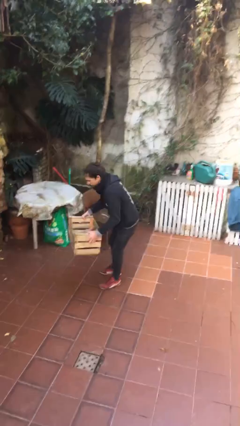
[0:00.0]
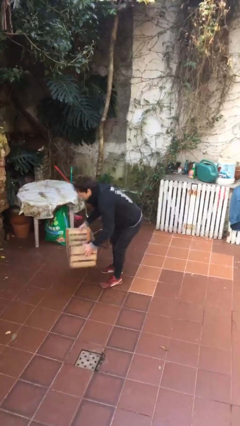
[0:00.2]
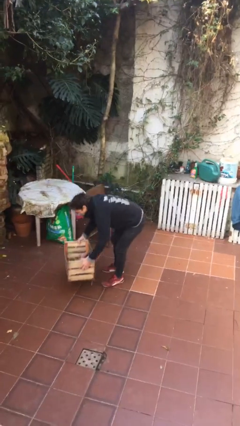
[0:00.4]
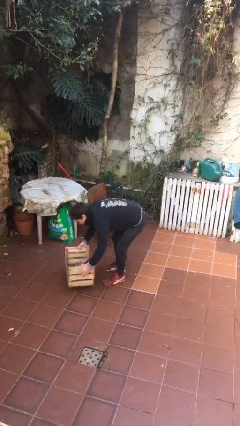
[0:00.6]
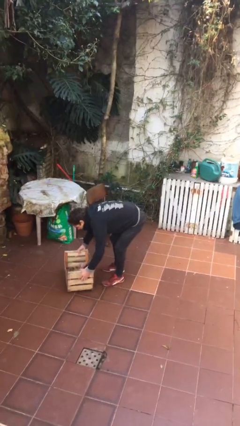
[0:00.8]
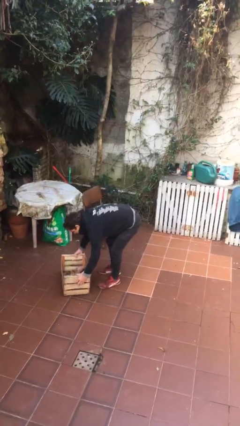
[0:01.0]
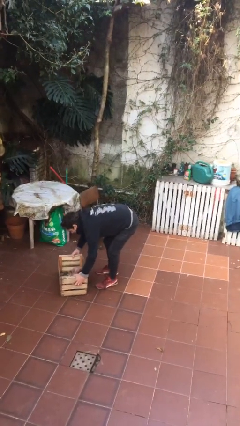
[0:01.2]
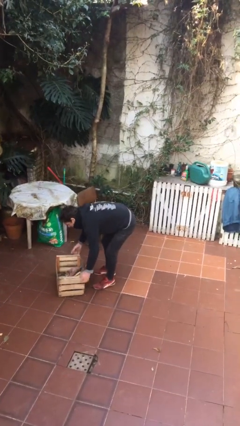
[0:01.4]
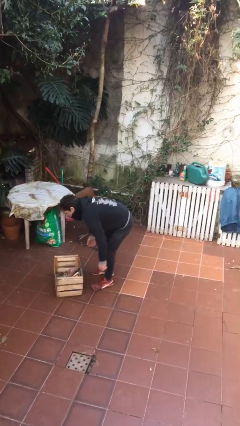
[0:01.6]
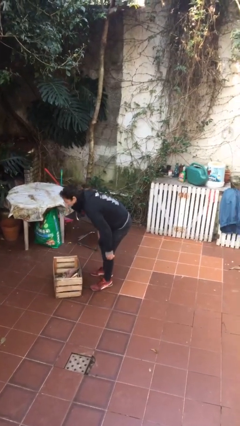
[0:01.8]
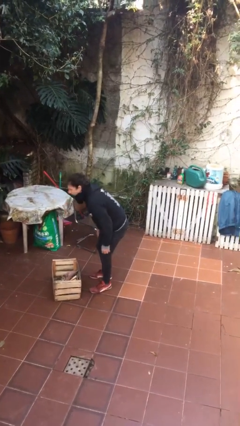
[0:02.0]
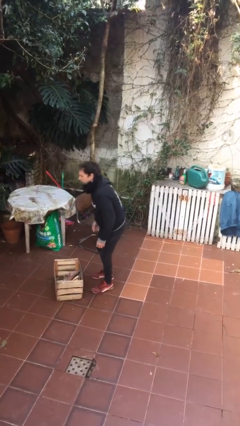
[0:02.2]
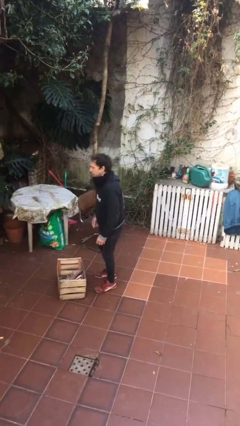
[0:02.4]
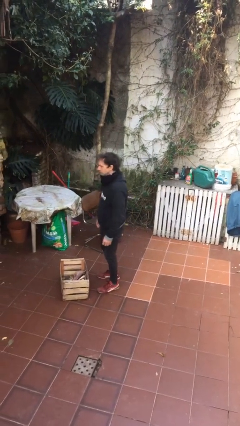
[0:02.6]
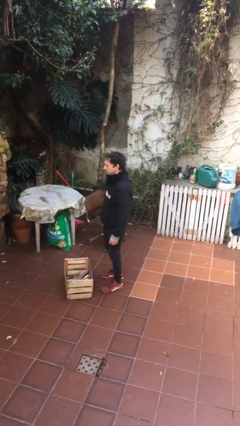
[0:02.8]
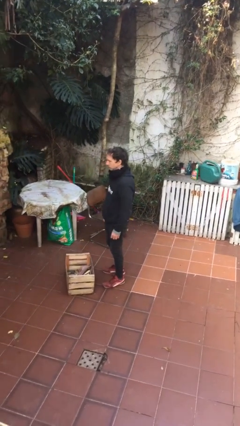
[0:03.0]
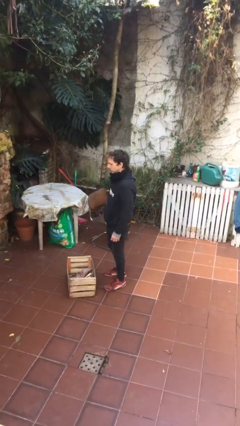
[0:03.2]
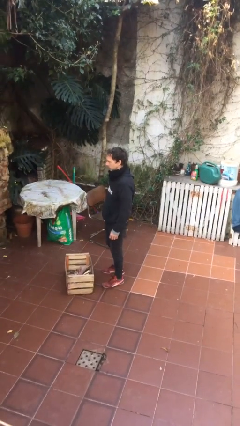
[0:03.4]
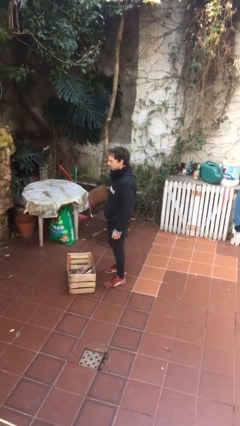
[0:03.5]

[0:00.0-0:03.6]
person puts down object on floor

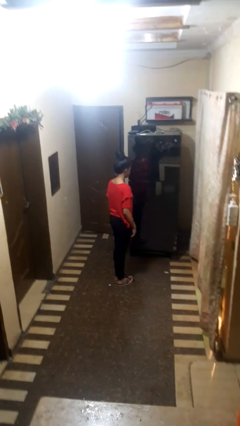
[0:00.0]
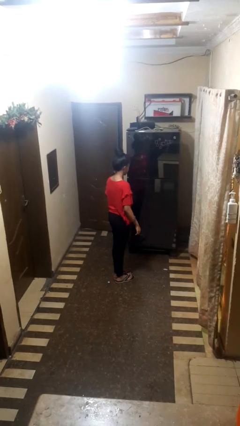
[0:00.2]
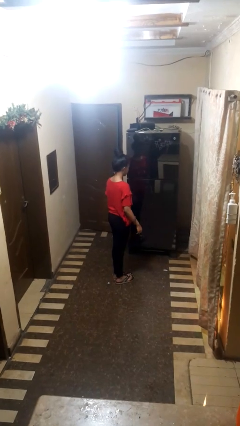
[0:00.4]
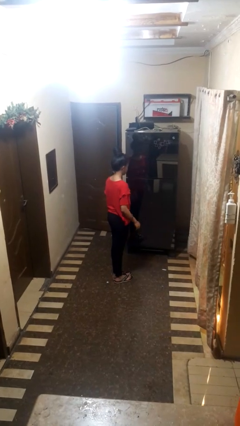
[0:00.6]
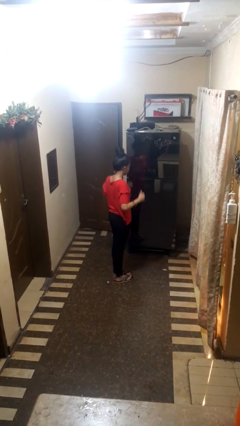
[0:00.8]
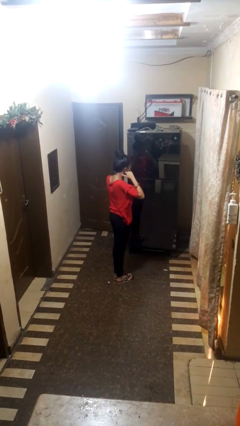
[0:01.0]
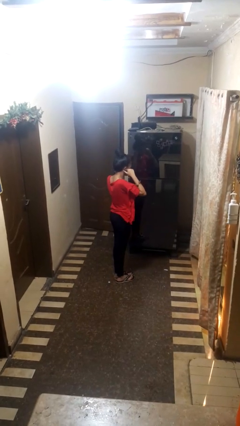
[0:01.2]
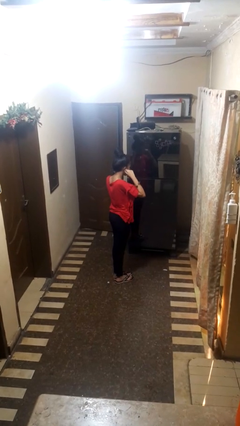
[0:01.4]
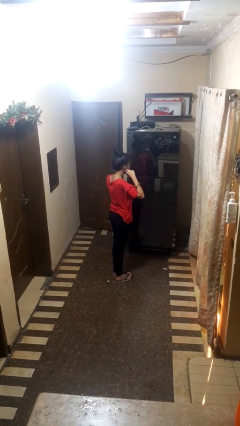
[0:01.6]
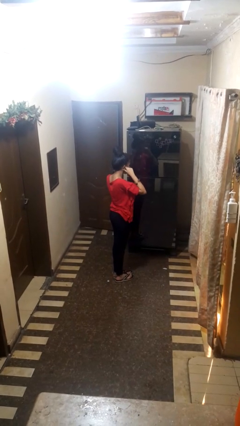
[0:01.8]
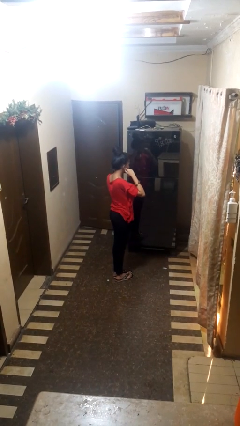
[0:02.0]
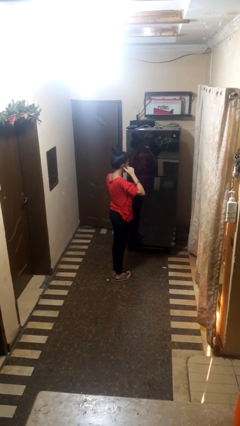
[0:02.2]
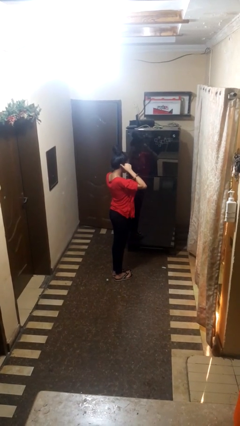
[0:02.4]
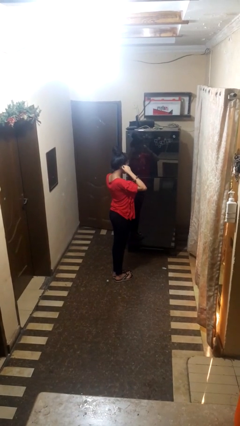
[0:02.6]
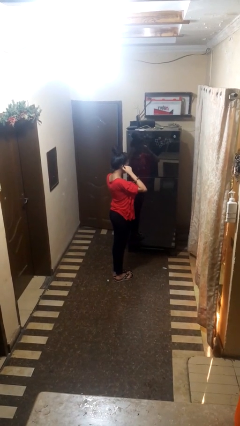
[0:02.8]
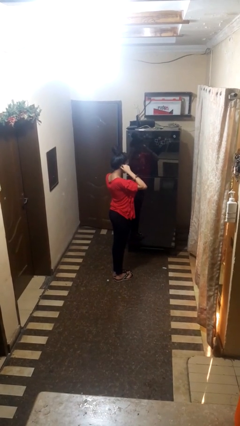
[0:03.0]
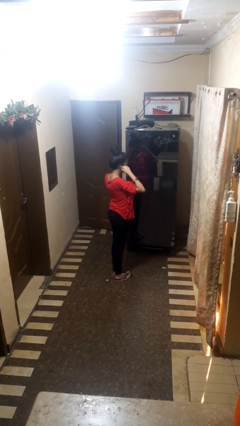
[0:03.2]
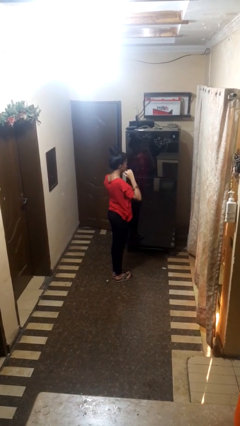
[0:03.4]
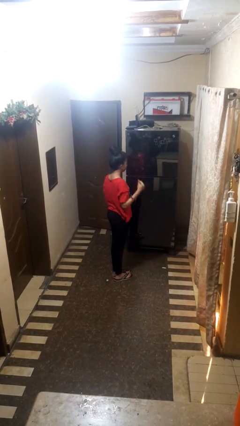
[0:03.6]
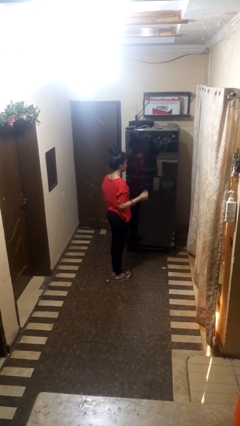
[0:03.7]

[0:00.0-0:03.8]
person touches earlobe

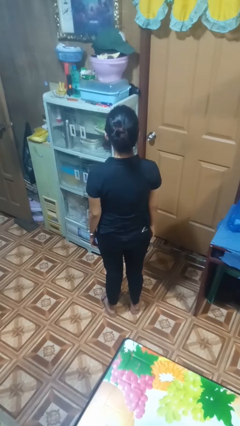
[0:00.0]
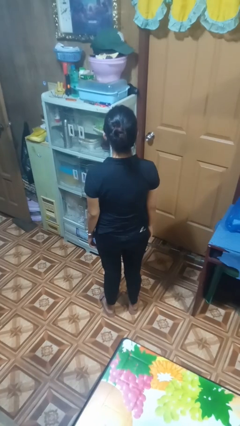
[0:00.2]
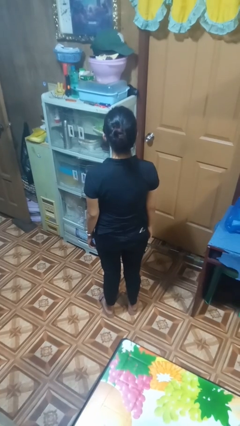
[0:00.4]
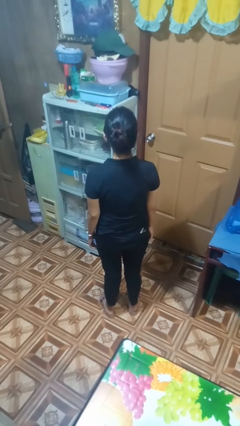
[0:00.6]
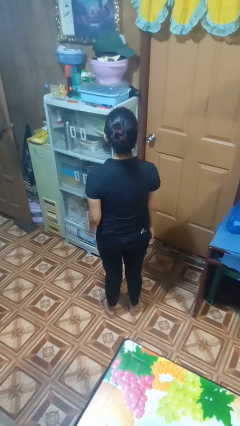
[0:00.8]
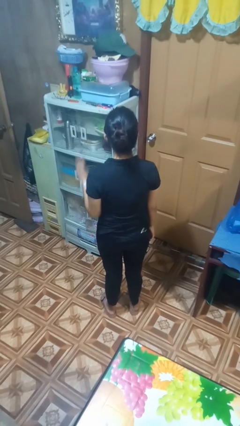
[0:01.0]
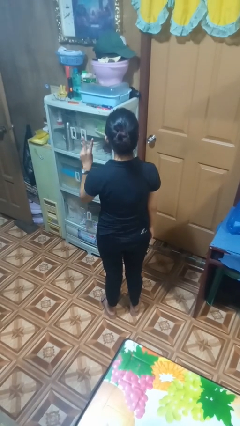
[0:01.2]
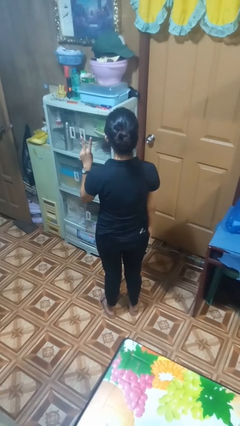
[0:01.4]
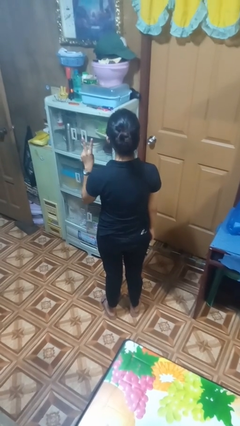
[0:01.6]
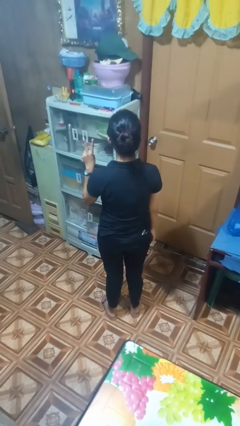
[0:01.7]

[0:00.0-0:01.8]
person gestures peace

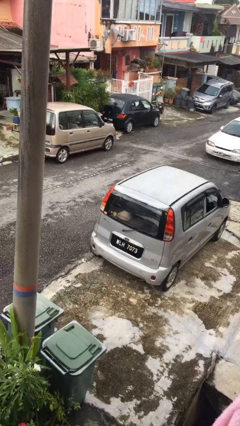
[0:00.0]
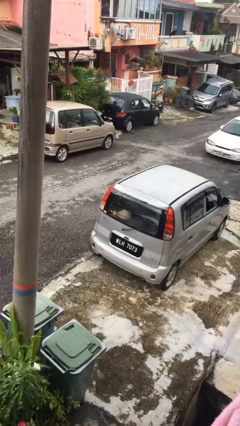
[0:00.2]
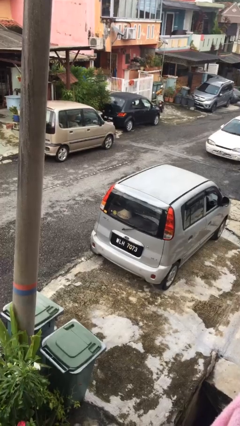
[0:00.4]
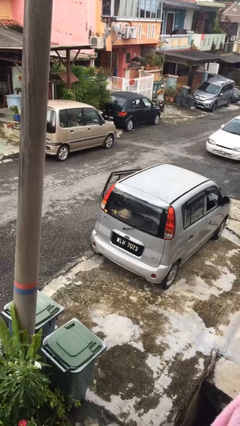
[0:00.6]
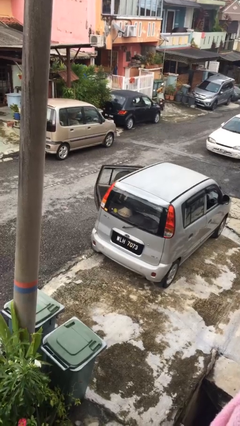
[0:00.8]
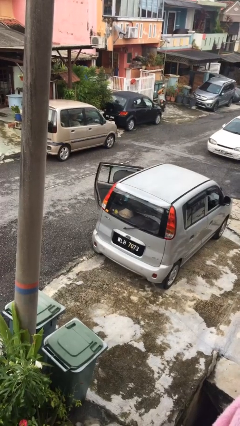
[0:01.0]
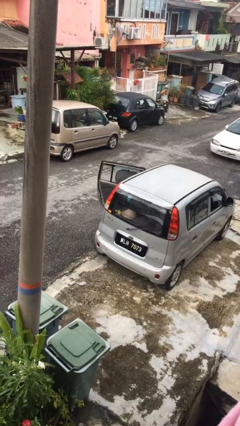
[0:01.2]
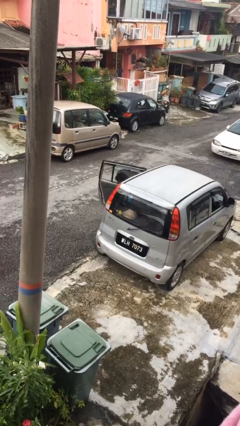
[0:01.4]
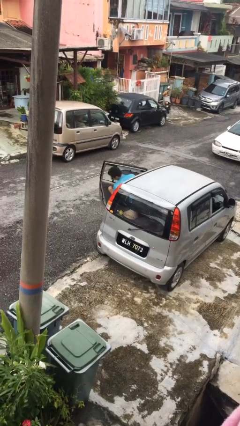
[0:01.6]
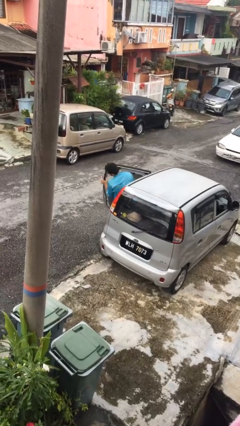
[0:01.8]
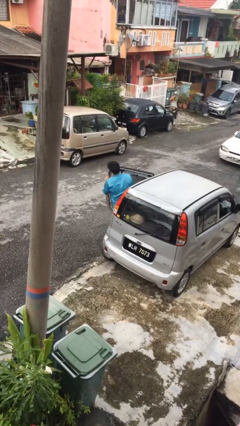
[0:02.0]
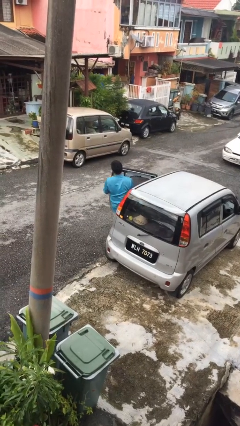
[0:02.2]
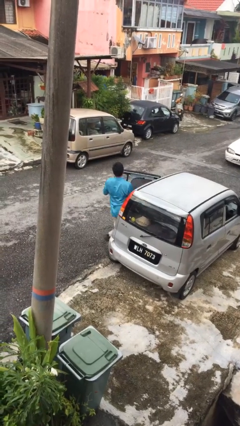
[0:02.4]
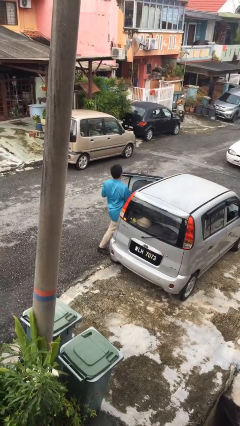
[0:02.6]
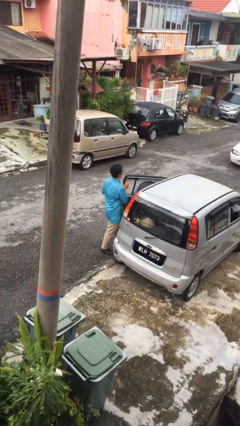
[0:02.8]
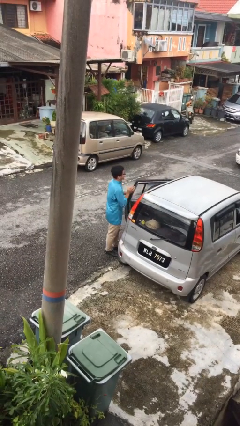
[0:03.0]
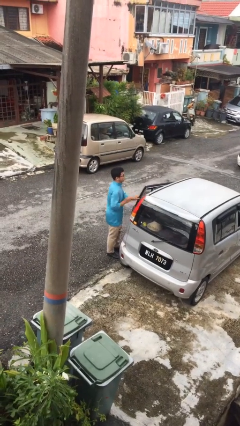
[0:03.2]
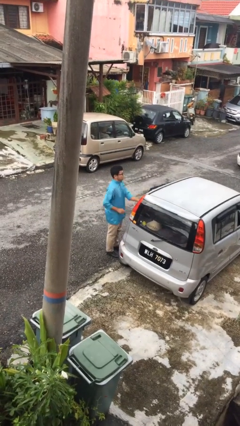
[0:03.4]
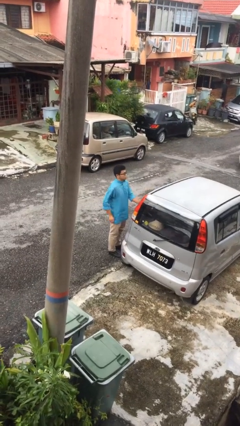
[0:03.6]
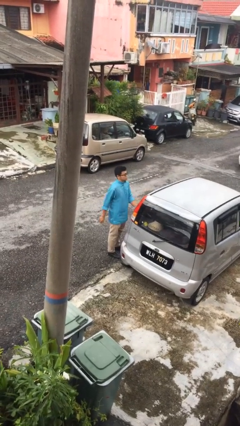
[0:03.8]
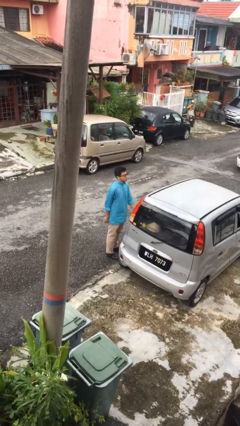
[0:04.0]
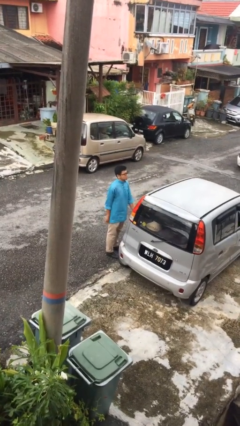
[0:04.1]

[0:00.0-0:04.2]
person exits car

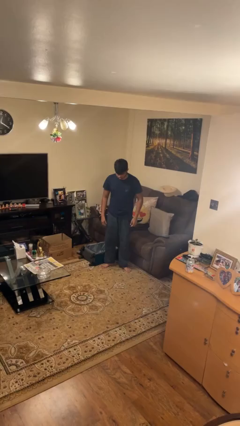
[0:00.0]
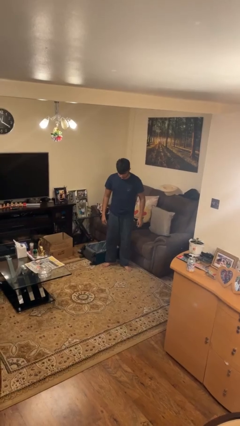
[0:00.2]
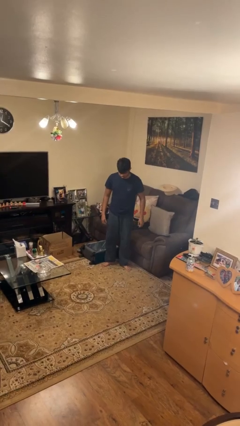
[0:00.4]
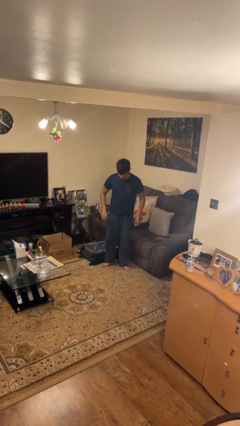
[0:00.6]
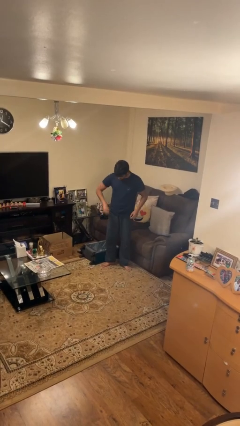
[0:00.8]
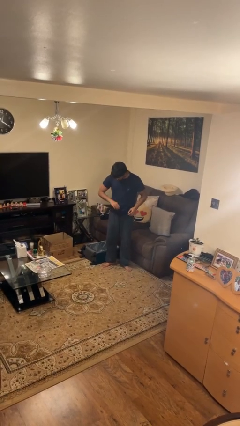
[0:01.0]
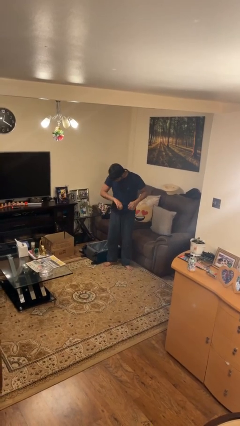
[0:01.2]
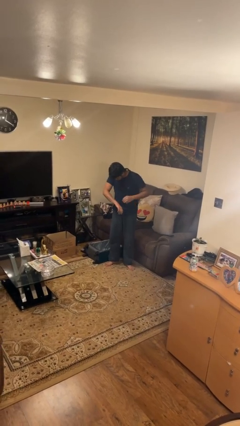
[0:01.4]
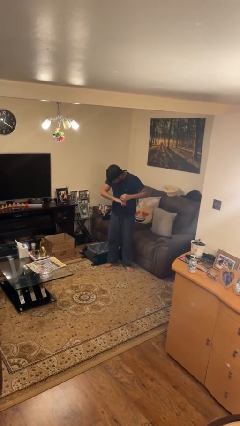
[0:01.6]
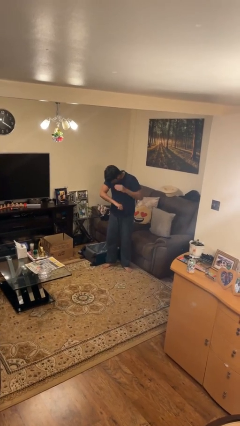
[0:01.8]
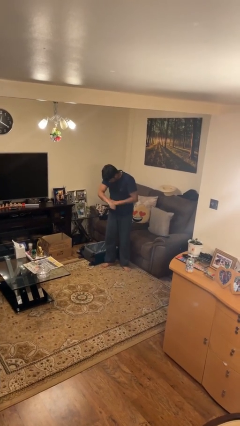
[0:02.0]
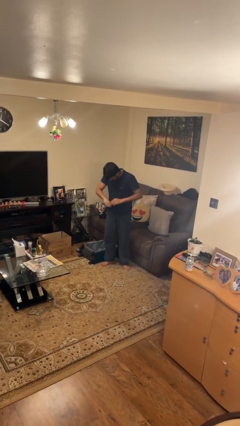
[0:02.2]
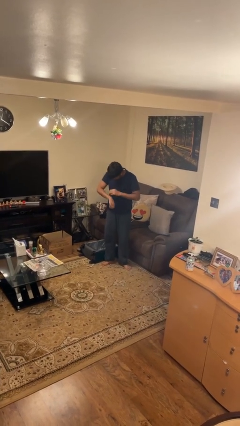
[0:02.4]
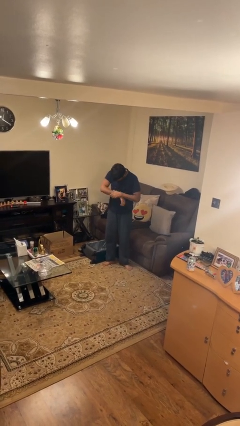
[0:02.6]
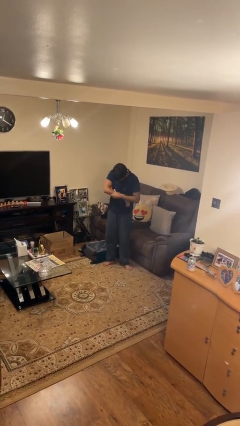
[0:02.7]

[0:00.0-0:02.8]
person swats bug

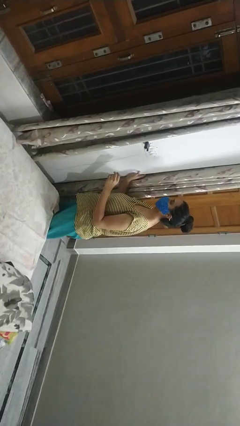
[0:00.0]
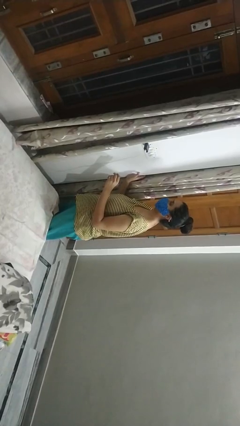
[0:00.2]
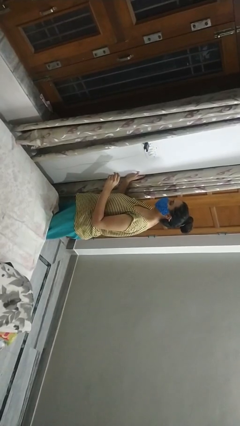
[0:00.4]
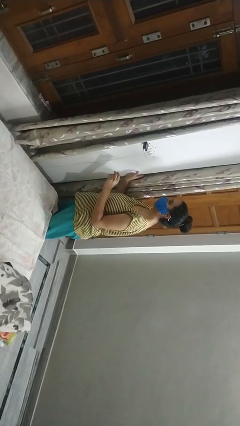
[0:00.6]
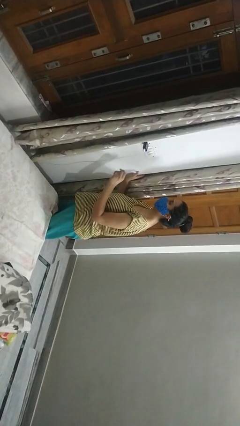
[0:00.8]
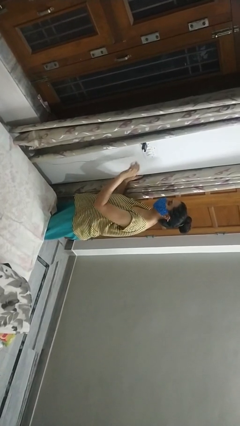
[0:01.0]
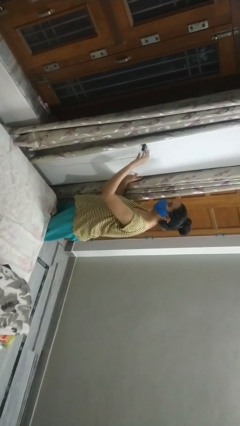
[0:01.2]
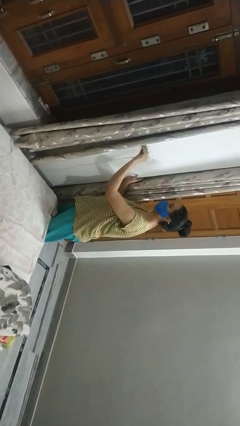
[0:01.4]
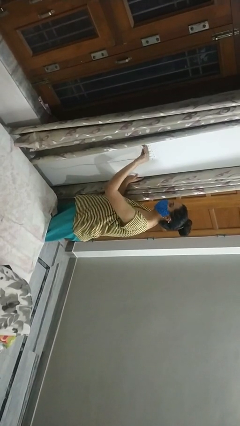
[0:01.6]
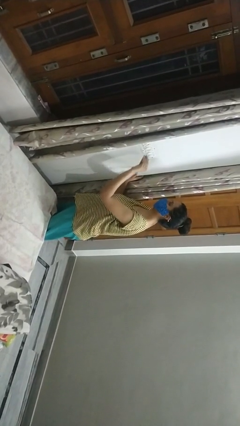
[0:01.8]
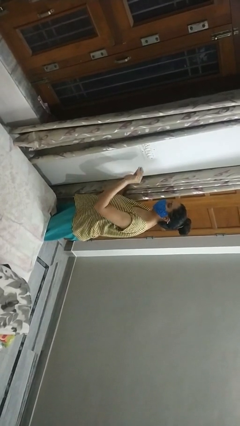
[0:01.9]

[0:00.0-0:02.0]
person unplugs from electrical socket
